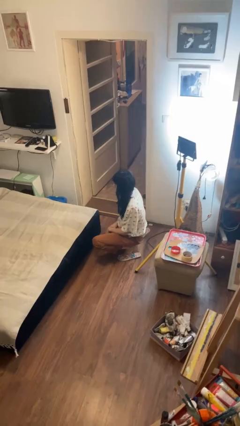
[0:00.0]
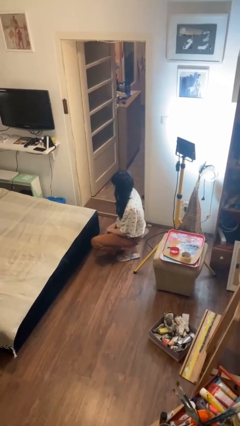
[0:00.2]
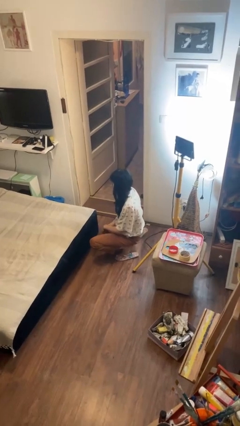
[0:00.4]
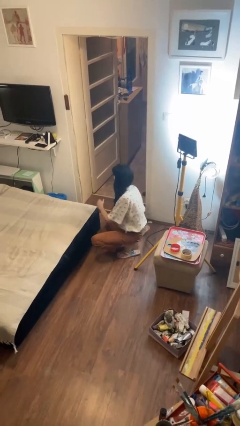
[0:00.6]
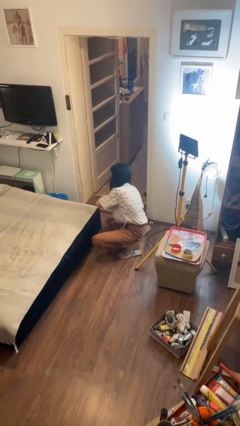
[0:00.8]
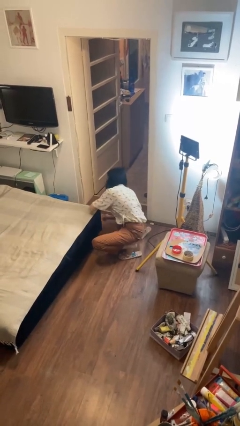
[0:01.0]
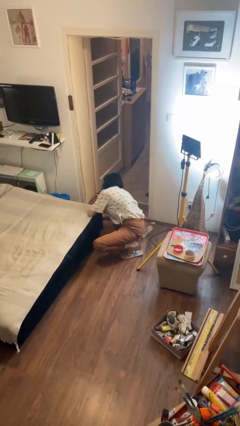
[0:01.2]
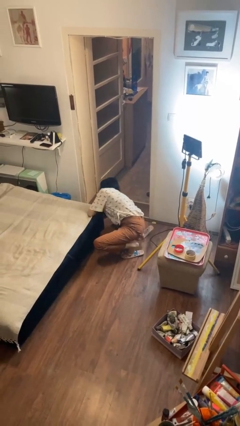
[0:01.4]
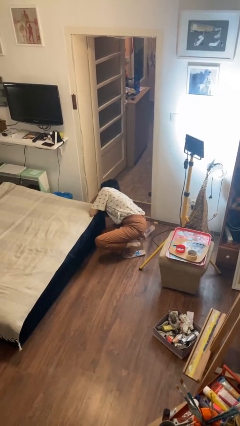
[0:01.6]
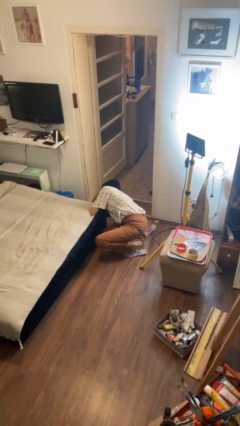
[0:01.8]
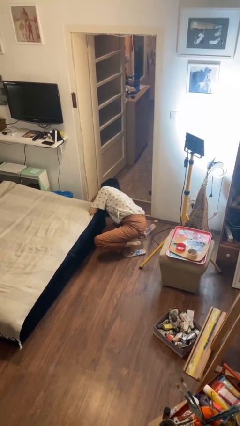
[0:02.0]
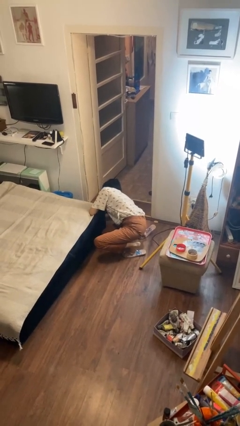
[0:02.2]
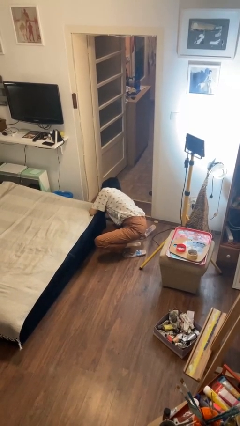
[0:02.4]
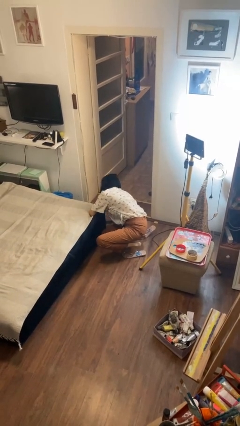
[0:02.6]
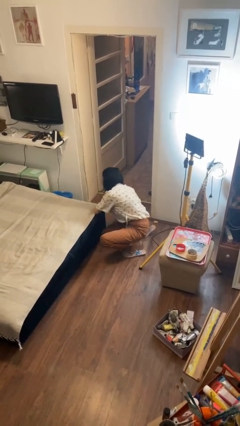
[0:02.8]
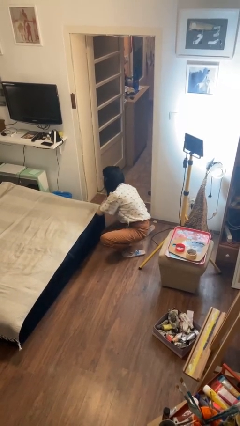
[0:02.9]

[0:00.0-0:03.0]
person searches under bed

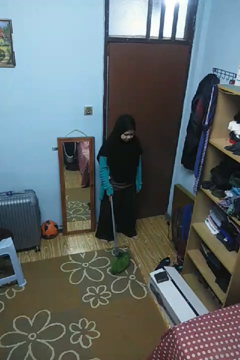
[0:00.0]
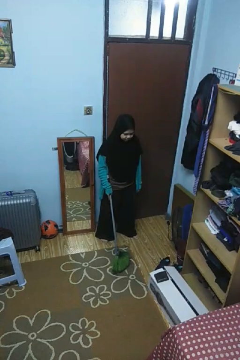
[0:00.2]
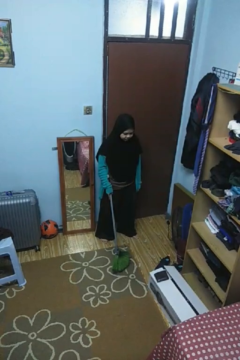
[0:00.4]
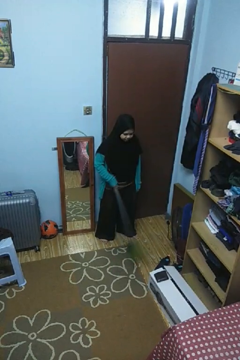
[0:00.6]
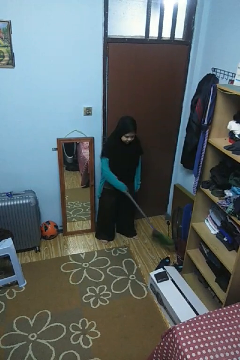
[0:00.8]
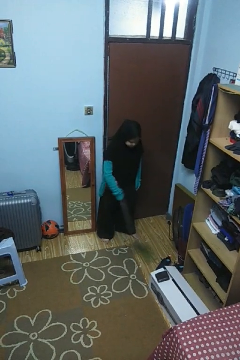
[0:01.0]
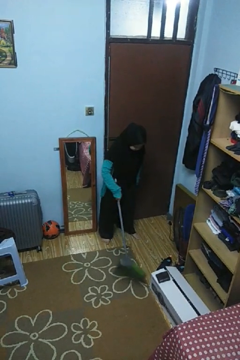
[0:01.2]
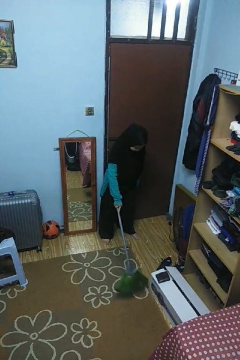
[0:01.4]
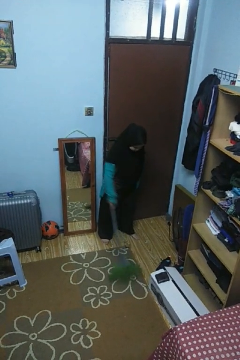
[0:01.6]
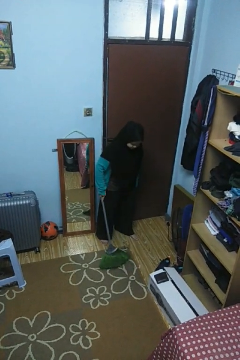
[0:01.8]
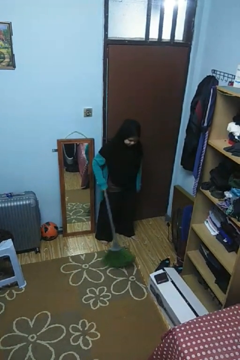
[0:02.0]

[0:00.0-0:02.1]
person sweeps floor

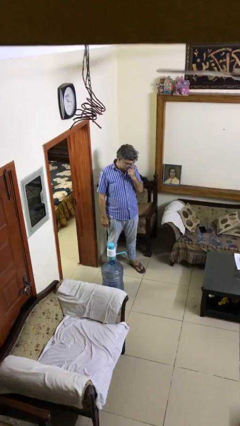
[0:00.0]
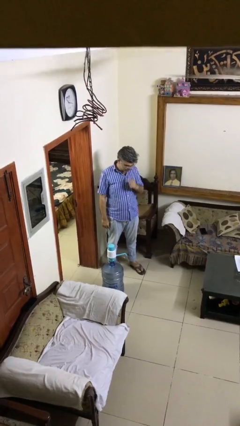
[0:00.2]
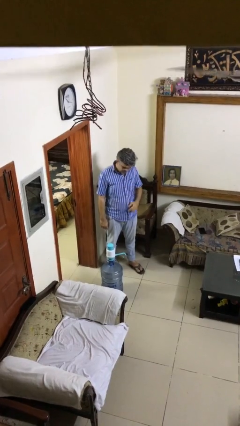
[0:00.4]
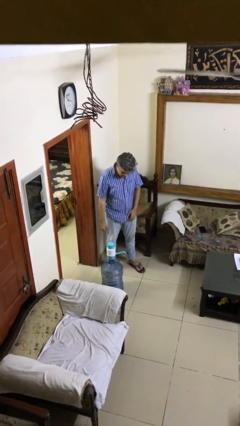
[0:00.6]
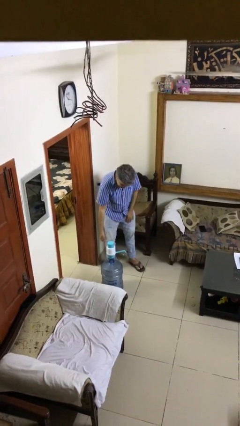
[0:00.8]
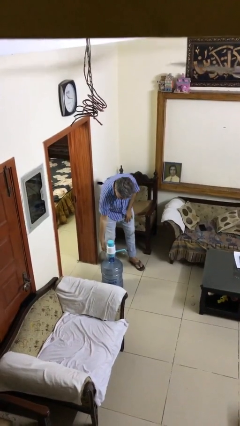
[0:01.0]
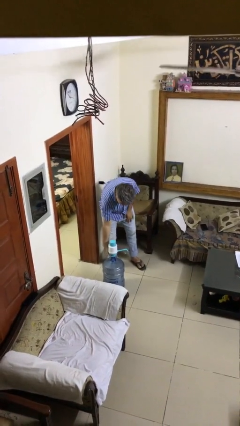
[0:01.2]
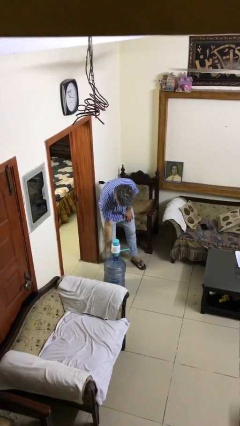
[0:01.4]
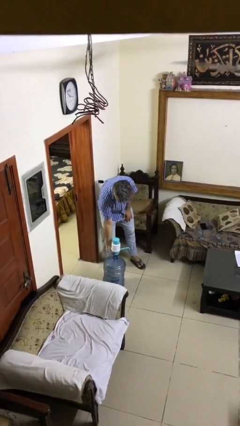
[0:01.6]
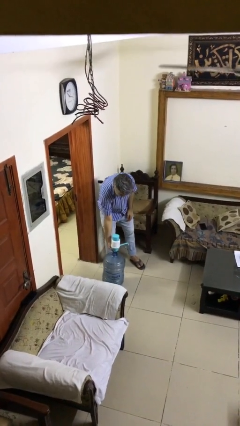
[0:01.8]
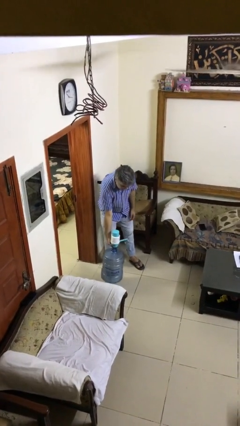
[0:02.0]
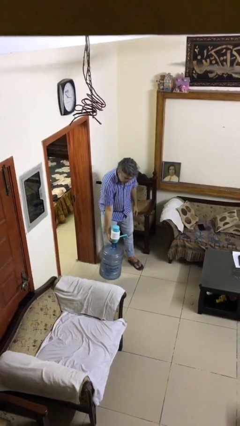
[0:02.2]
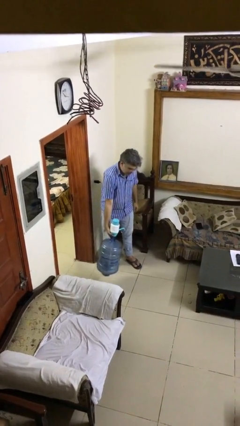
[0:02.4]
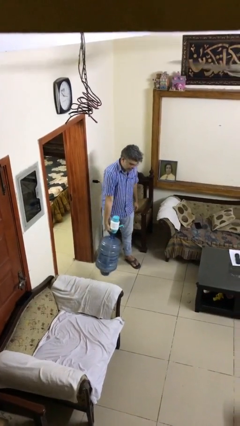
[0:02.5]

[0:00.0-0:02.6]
person picks up object from floor

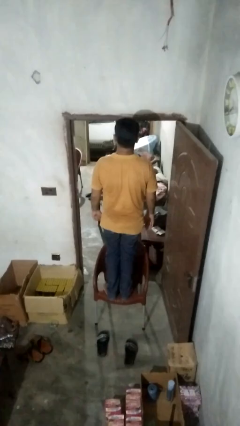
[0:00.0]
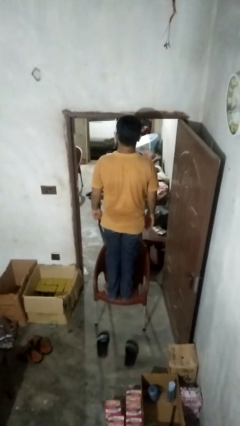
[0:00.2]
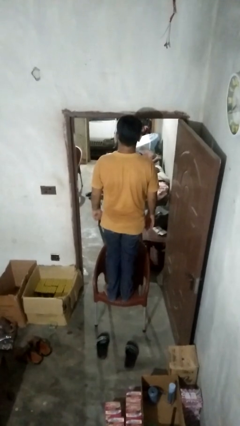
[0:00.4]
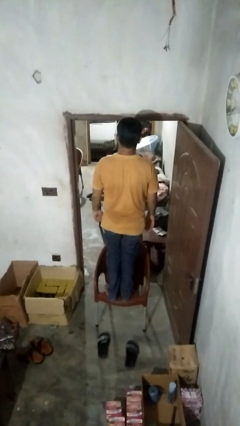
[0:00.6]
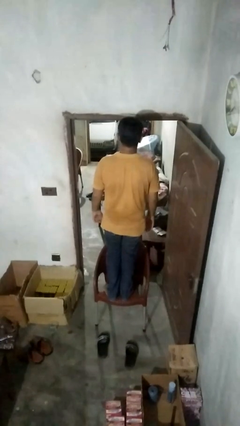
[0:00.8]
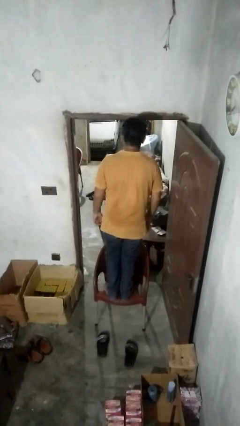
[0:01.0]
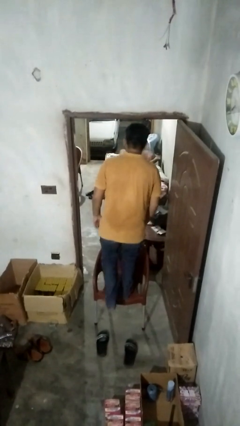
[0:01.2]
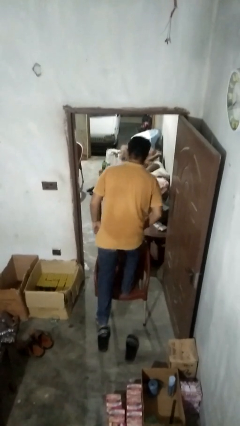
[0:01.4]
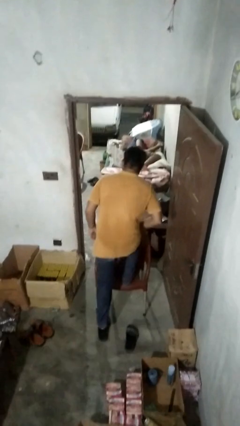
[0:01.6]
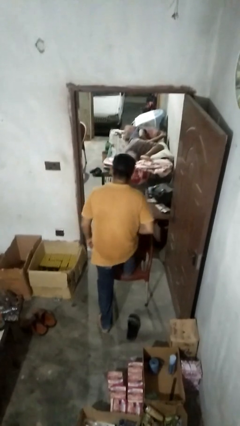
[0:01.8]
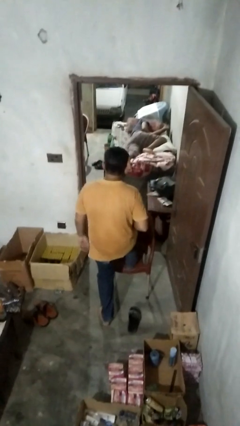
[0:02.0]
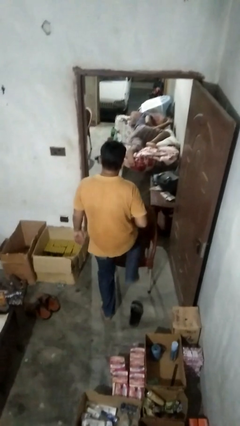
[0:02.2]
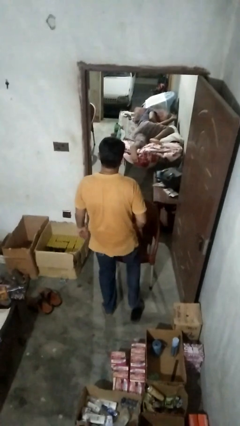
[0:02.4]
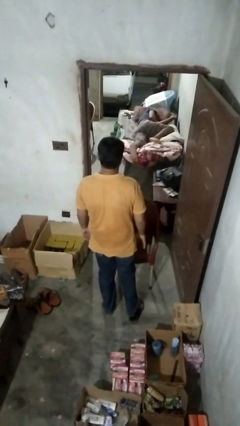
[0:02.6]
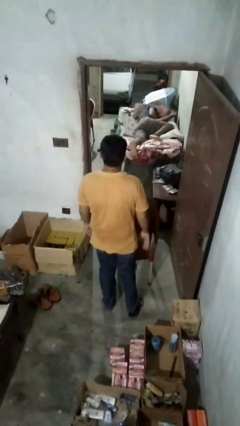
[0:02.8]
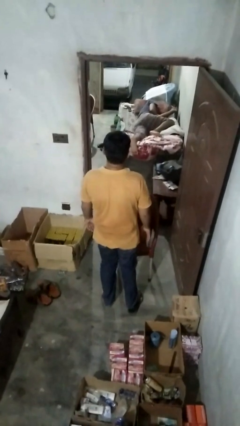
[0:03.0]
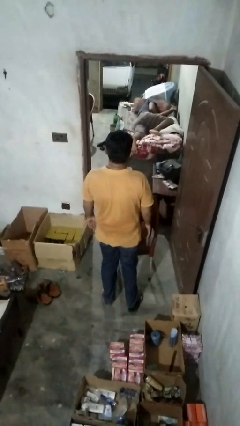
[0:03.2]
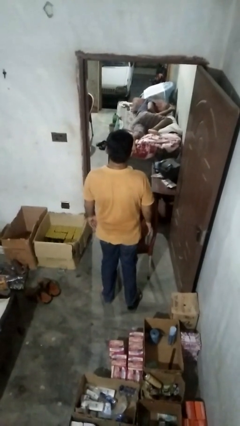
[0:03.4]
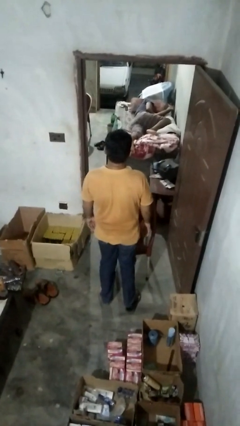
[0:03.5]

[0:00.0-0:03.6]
person climbs off chair

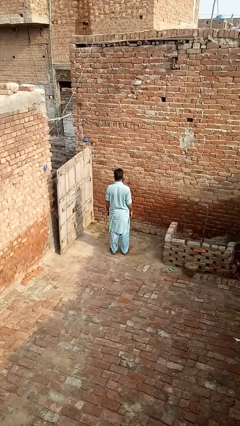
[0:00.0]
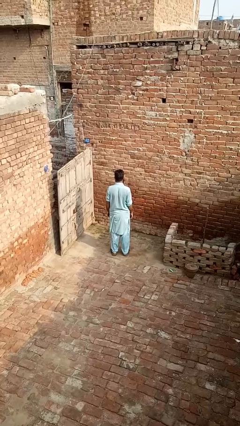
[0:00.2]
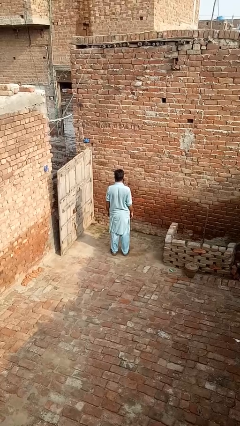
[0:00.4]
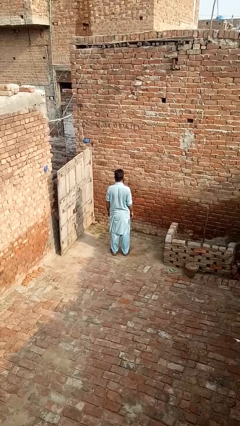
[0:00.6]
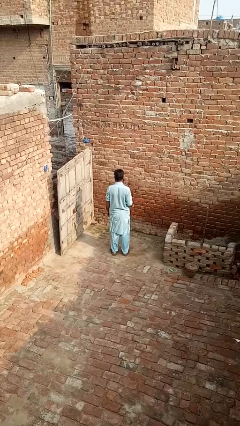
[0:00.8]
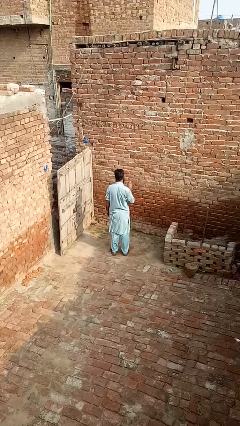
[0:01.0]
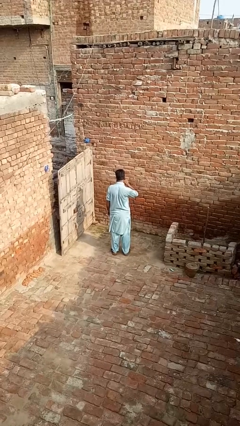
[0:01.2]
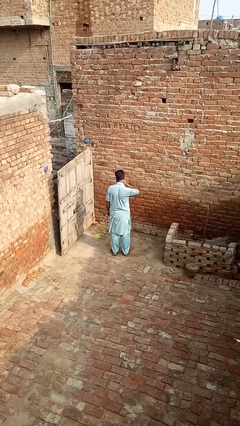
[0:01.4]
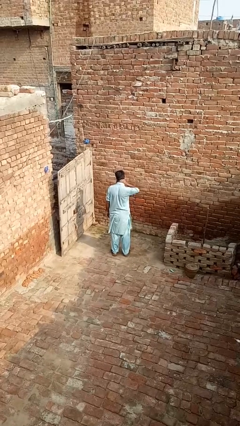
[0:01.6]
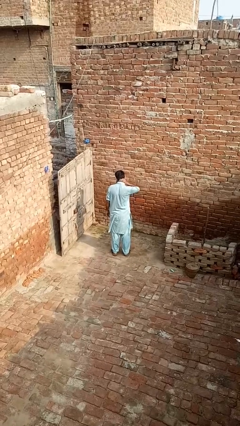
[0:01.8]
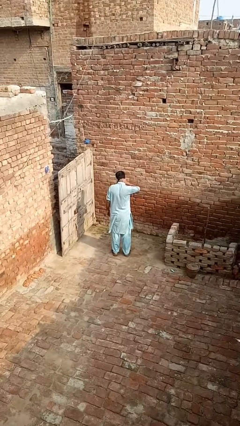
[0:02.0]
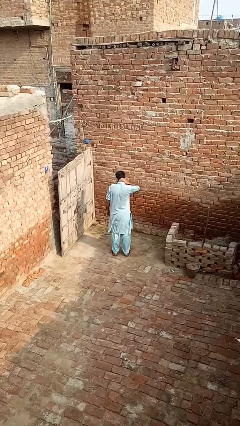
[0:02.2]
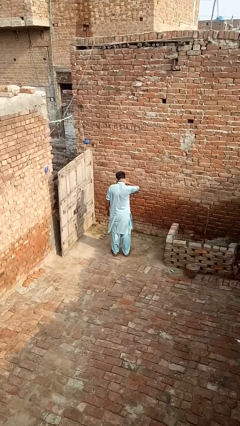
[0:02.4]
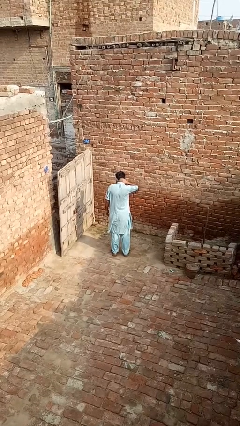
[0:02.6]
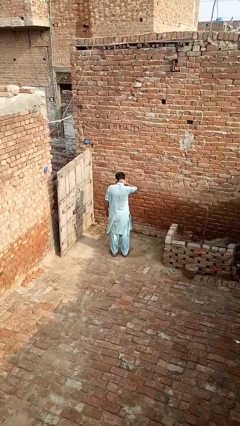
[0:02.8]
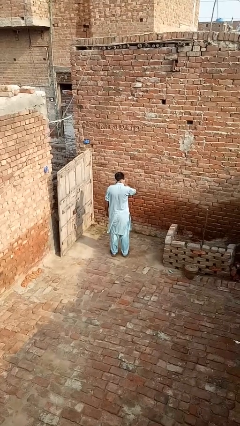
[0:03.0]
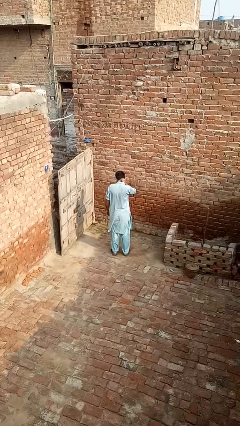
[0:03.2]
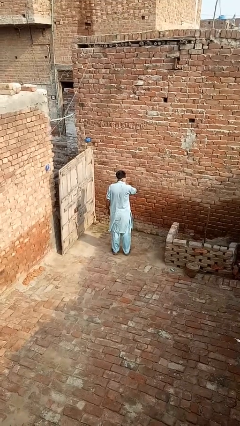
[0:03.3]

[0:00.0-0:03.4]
person rubs neck

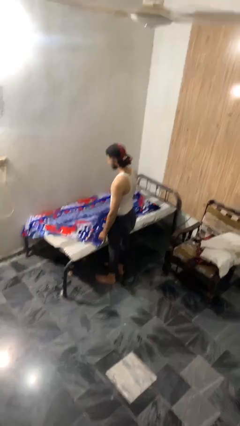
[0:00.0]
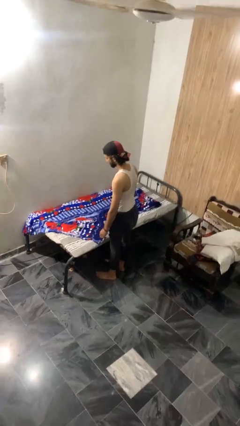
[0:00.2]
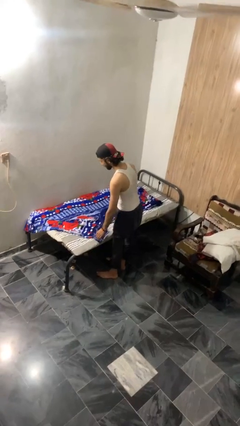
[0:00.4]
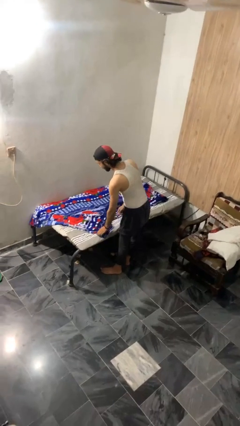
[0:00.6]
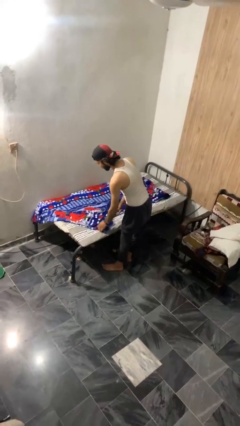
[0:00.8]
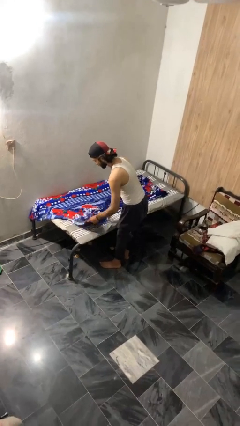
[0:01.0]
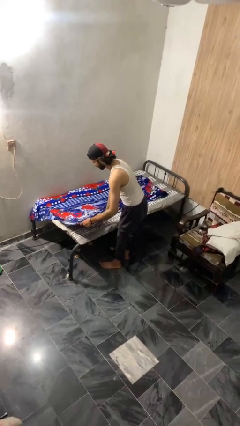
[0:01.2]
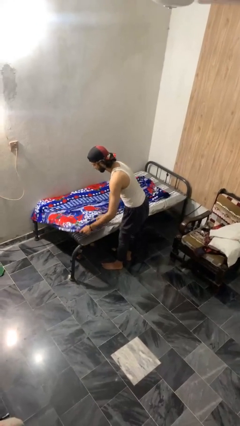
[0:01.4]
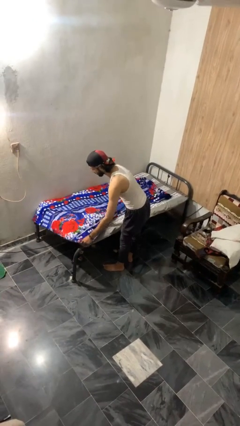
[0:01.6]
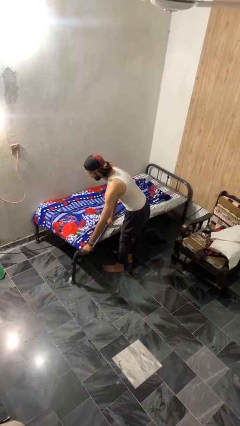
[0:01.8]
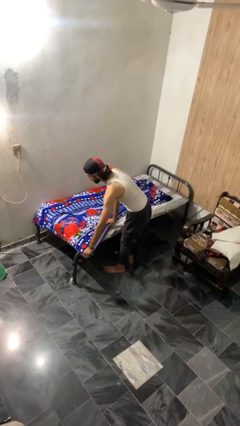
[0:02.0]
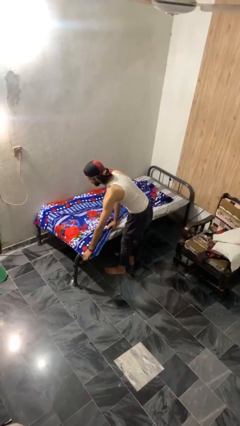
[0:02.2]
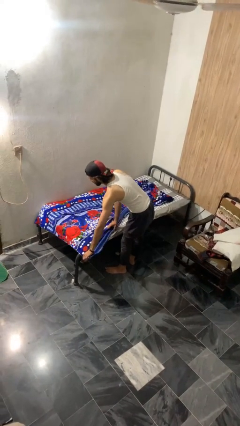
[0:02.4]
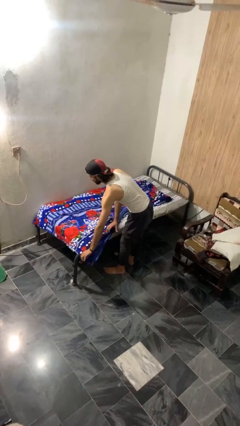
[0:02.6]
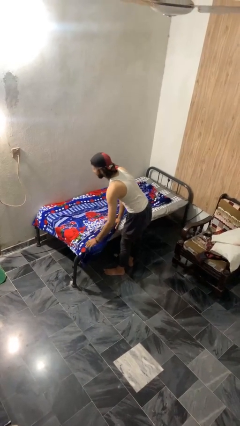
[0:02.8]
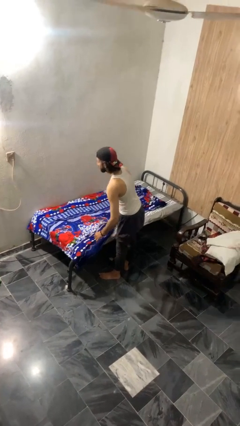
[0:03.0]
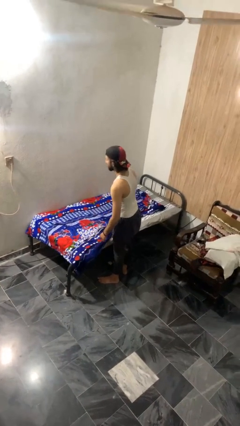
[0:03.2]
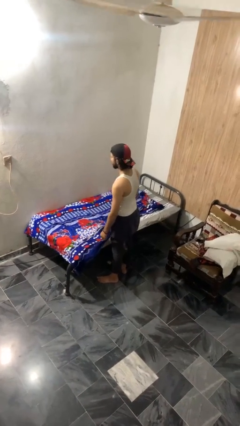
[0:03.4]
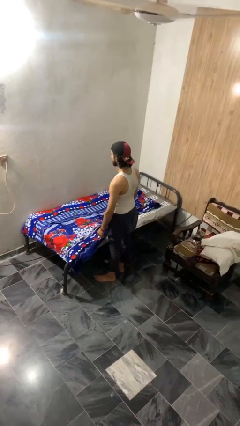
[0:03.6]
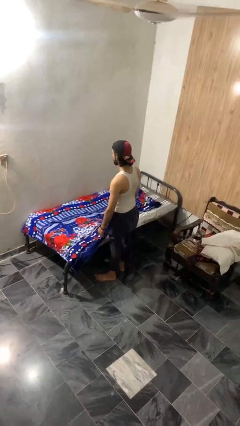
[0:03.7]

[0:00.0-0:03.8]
person makes bed
